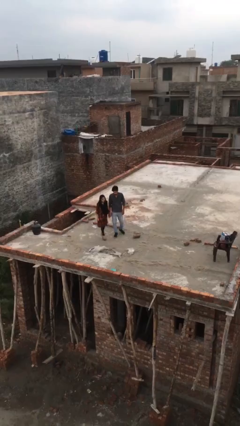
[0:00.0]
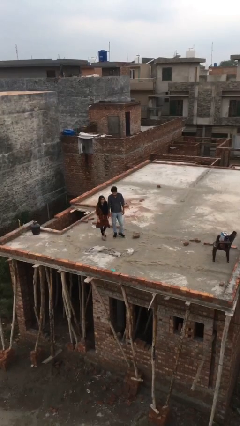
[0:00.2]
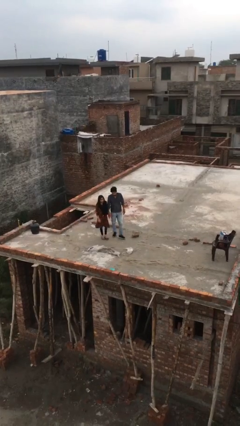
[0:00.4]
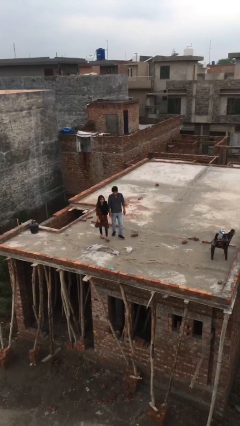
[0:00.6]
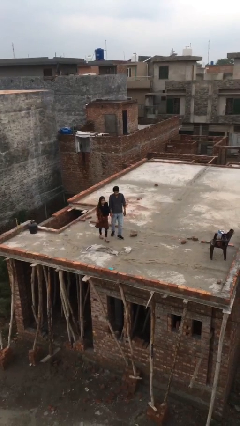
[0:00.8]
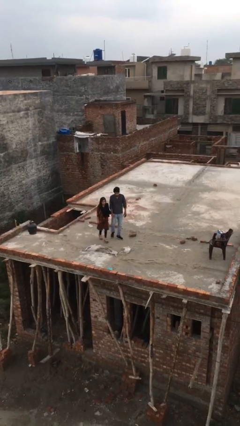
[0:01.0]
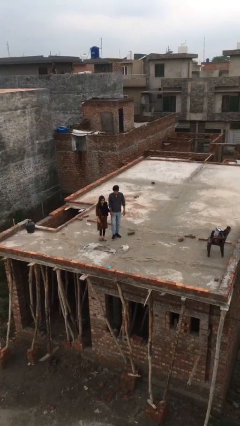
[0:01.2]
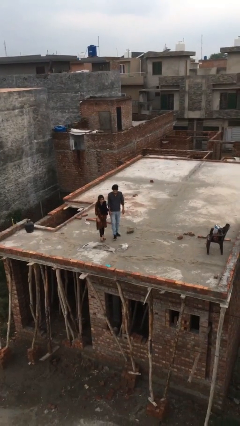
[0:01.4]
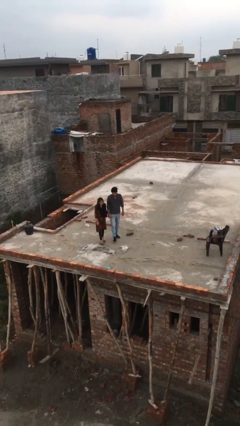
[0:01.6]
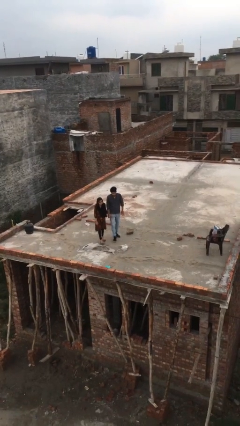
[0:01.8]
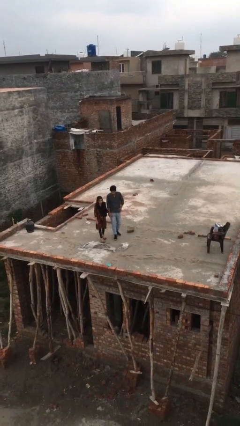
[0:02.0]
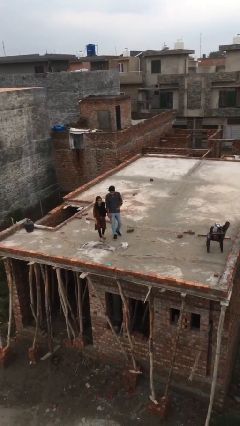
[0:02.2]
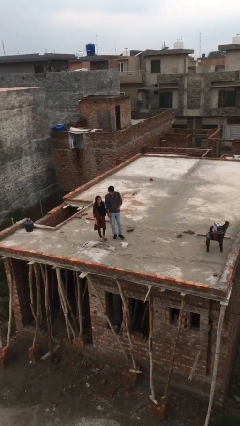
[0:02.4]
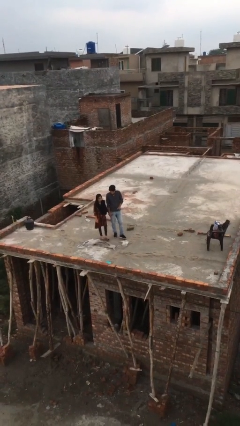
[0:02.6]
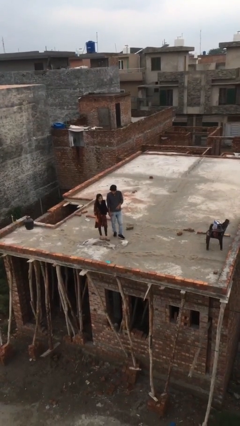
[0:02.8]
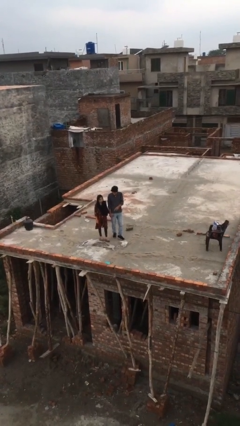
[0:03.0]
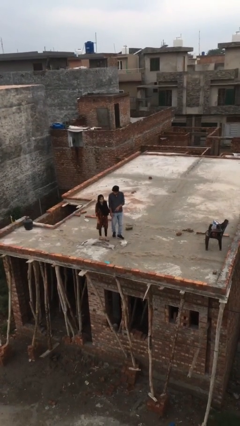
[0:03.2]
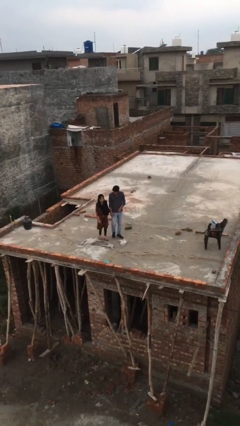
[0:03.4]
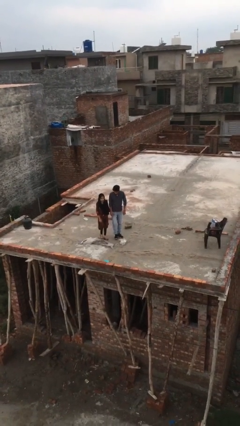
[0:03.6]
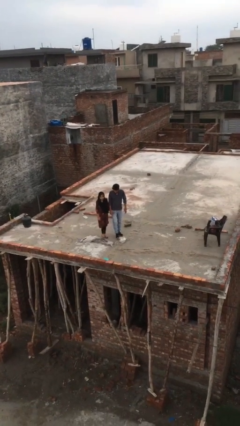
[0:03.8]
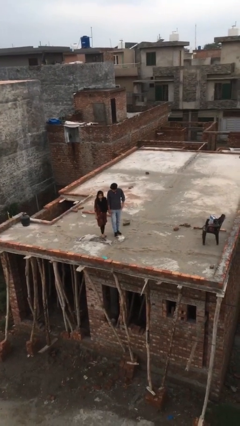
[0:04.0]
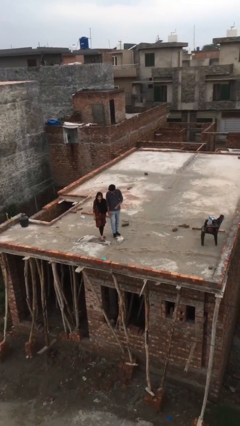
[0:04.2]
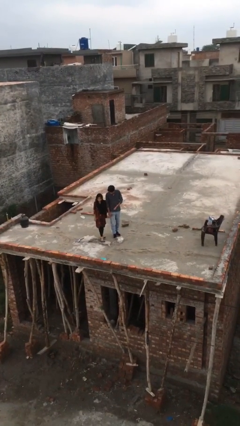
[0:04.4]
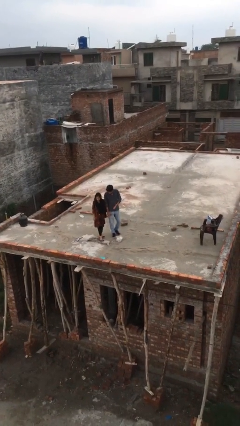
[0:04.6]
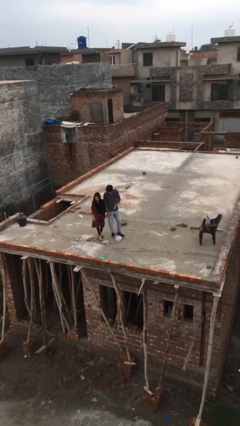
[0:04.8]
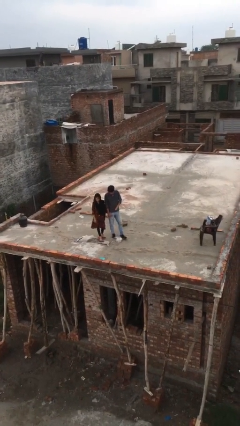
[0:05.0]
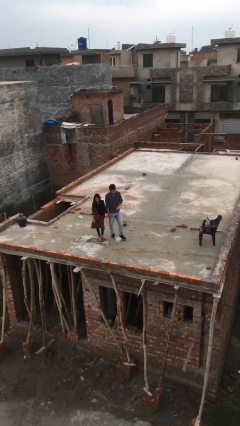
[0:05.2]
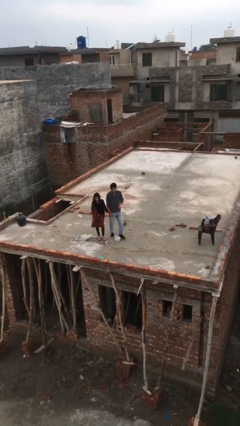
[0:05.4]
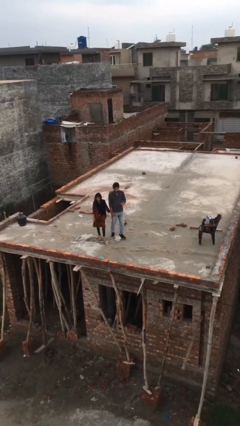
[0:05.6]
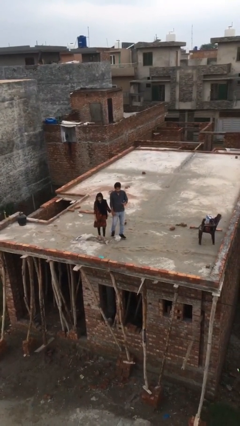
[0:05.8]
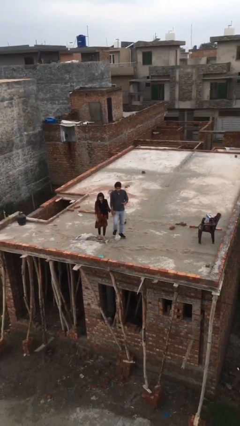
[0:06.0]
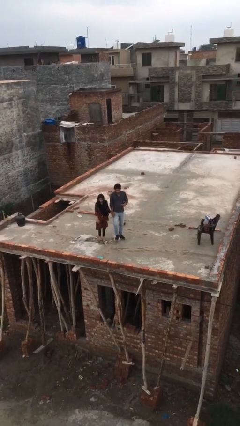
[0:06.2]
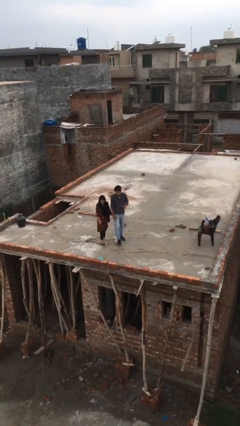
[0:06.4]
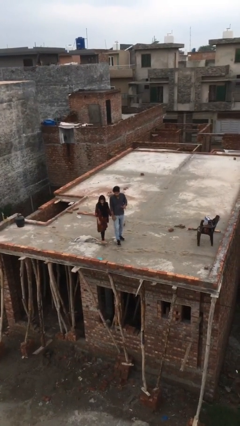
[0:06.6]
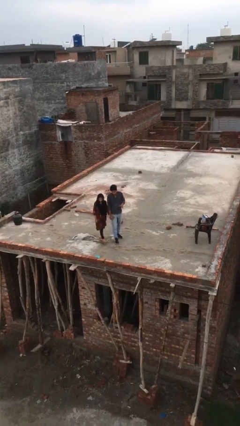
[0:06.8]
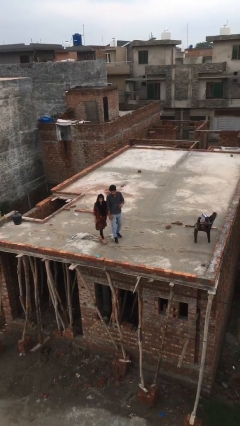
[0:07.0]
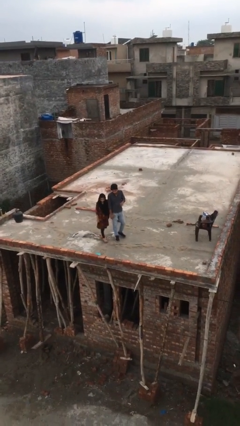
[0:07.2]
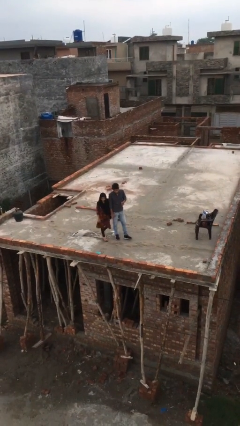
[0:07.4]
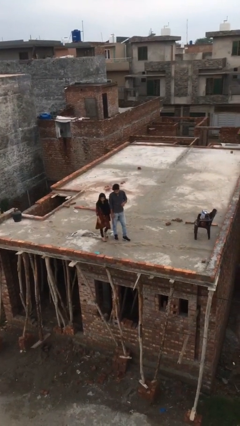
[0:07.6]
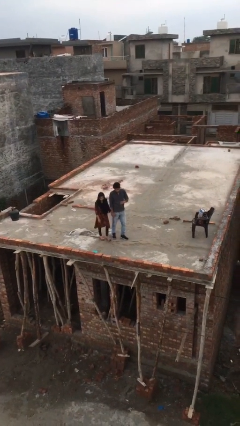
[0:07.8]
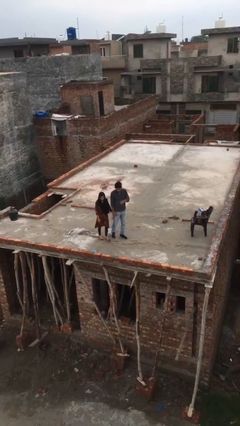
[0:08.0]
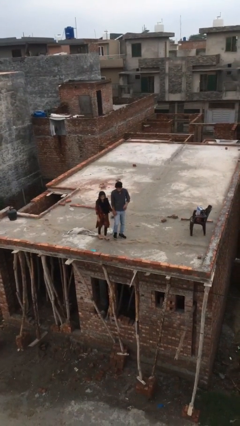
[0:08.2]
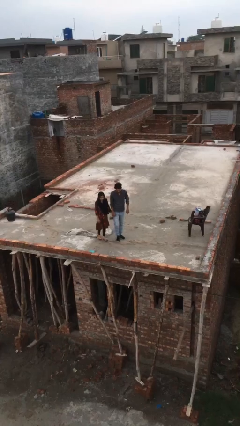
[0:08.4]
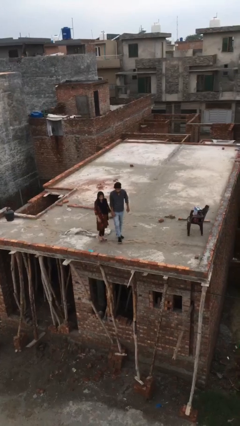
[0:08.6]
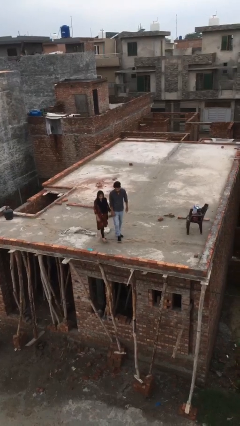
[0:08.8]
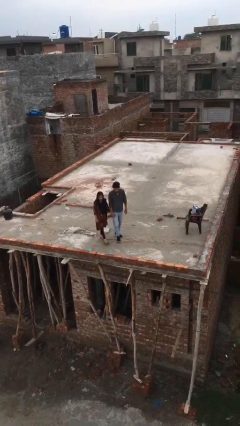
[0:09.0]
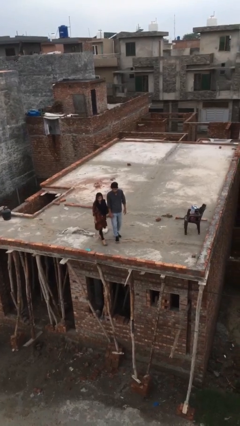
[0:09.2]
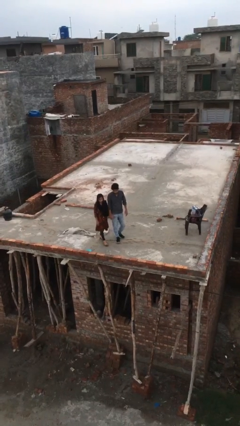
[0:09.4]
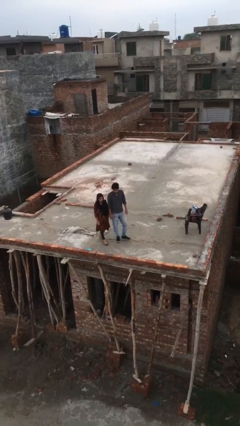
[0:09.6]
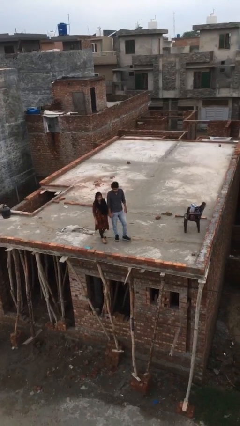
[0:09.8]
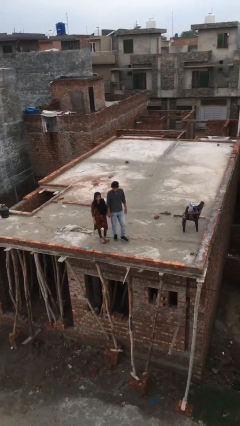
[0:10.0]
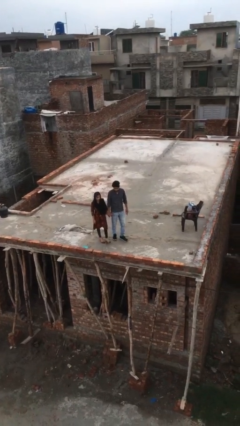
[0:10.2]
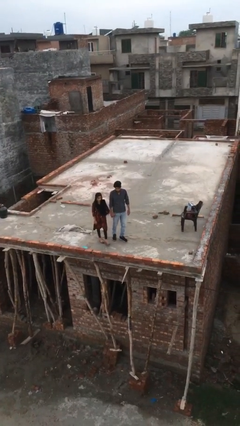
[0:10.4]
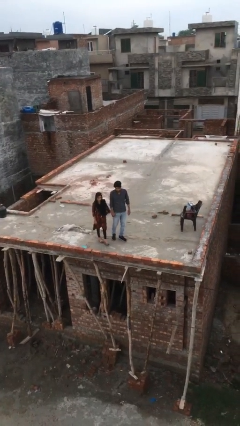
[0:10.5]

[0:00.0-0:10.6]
person holds hand

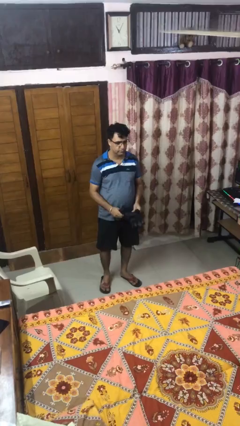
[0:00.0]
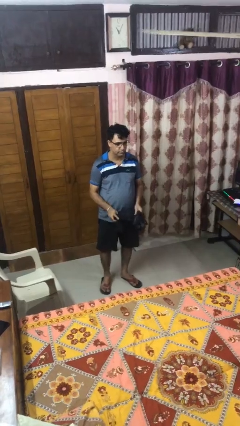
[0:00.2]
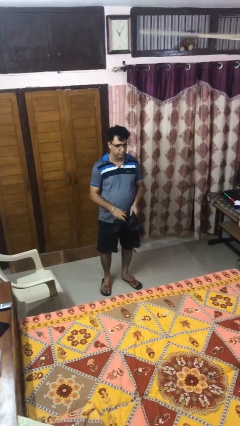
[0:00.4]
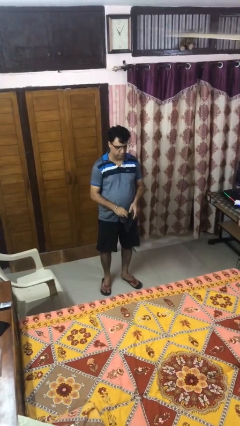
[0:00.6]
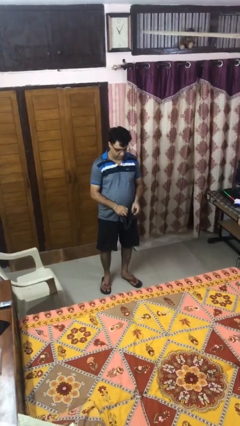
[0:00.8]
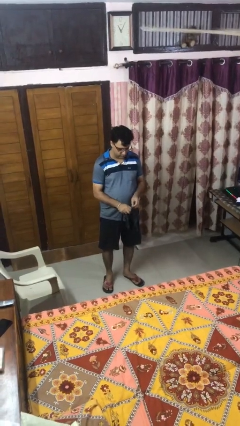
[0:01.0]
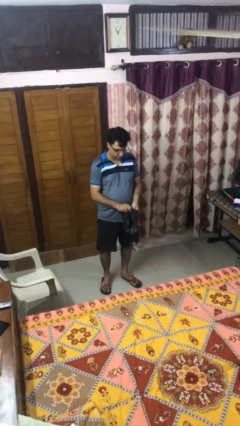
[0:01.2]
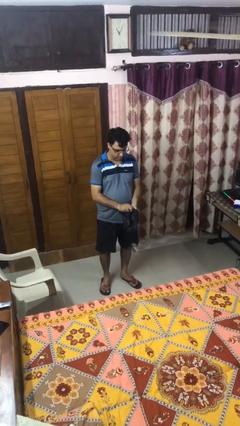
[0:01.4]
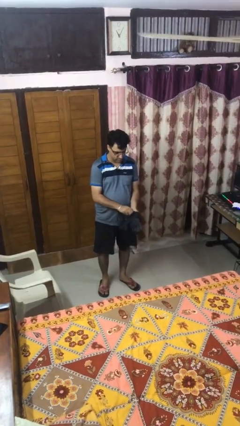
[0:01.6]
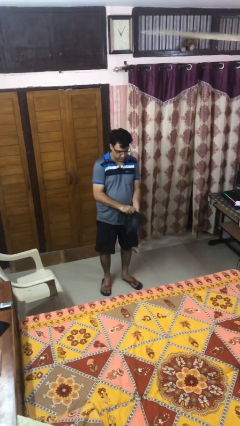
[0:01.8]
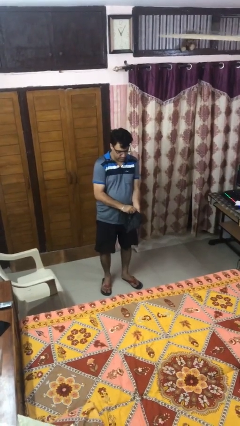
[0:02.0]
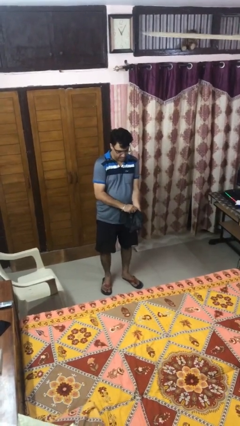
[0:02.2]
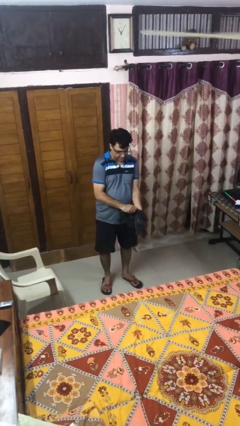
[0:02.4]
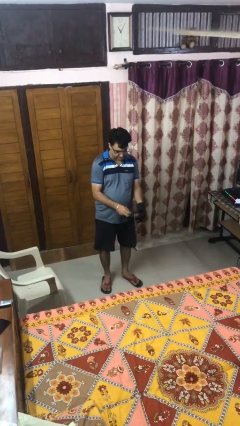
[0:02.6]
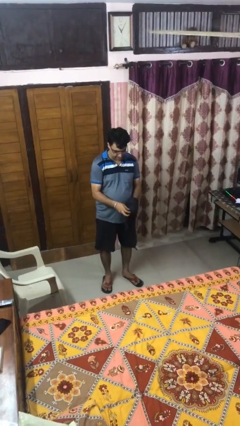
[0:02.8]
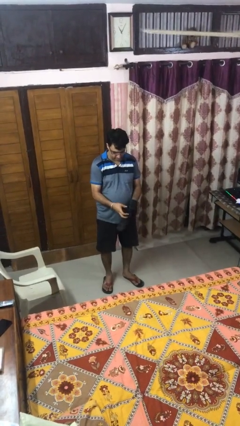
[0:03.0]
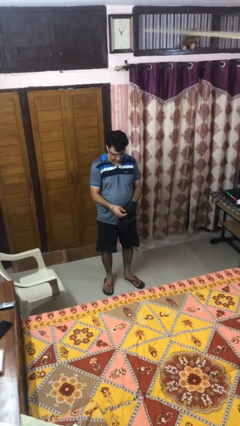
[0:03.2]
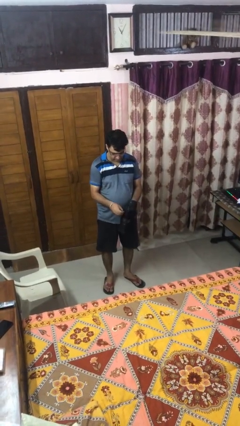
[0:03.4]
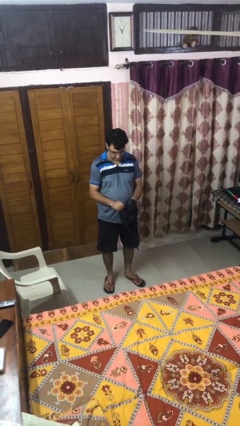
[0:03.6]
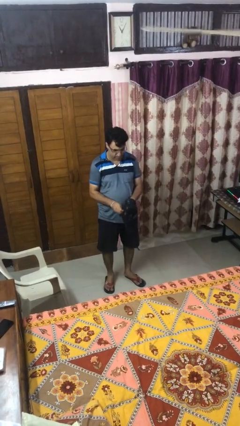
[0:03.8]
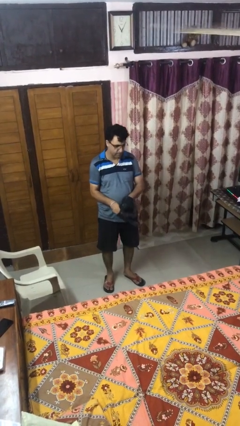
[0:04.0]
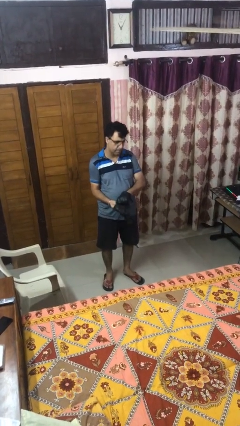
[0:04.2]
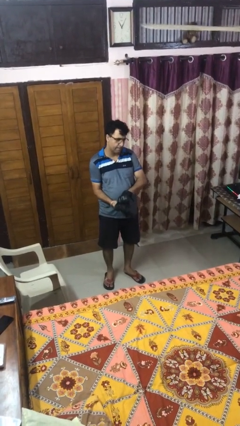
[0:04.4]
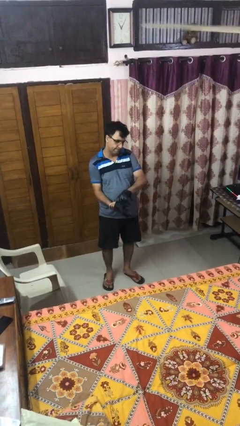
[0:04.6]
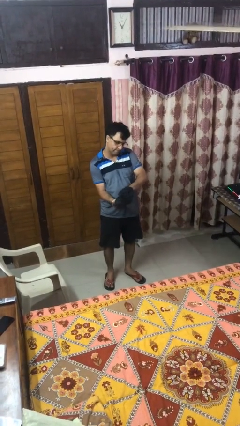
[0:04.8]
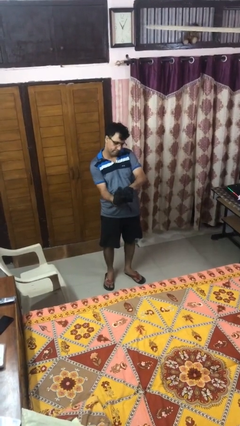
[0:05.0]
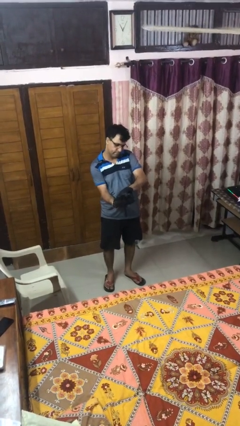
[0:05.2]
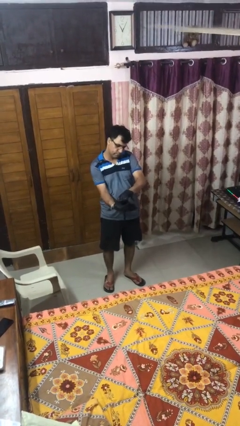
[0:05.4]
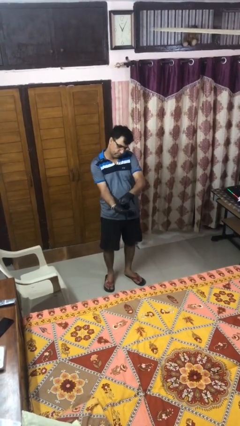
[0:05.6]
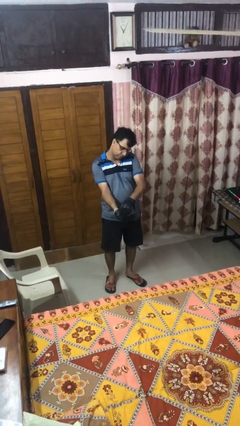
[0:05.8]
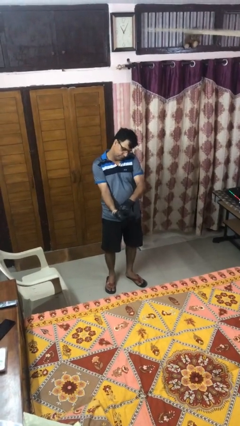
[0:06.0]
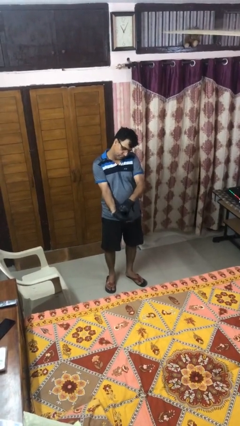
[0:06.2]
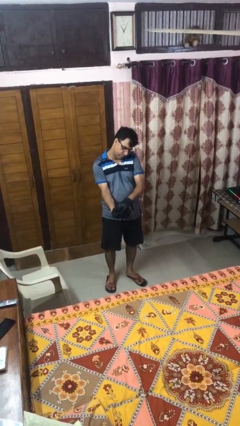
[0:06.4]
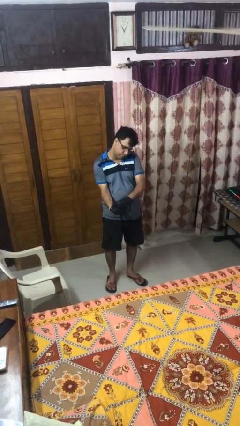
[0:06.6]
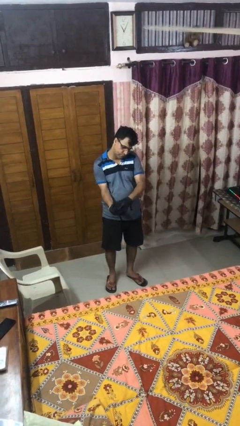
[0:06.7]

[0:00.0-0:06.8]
person puts on gloves

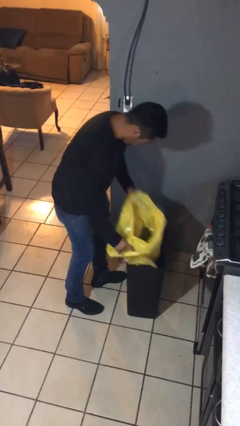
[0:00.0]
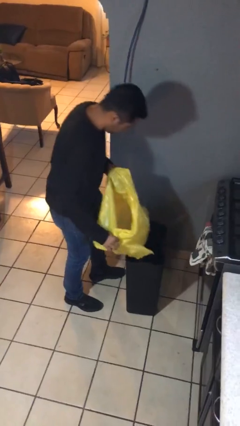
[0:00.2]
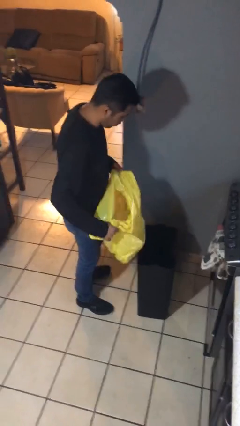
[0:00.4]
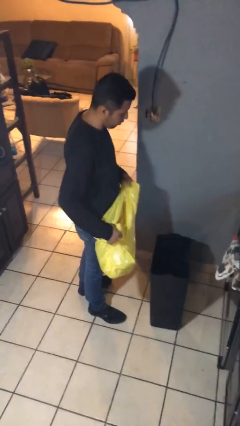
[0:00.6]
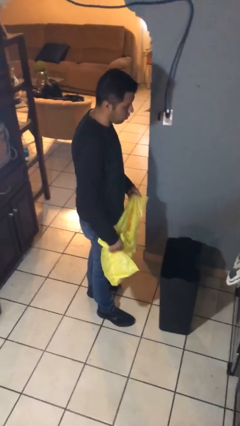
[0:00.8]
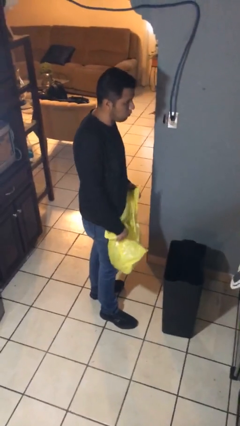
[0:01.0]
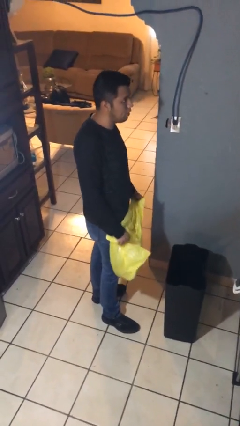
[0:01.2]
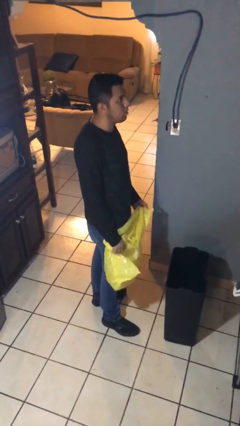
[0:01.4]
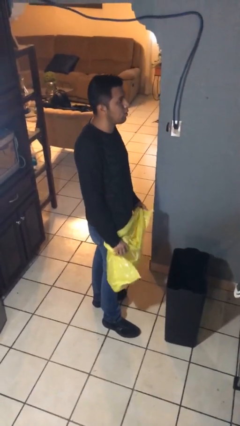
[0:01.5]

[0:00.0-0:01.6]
person removes trashbag from trashcan
